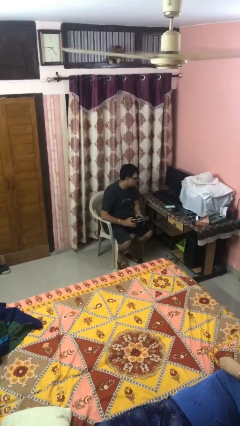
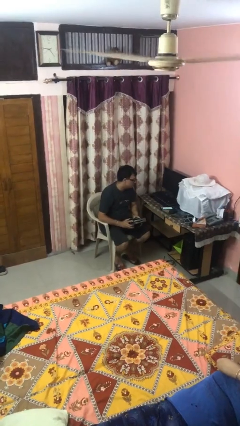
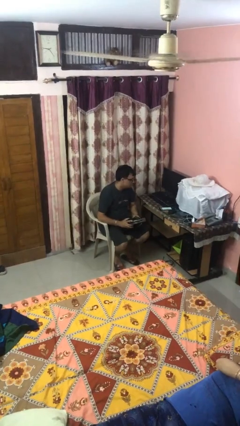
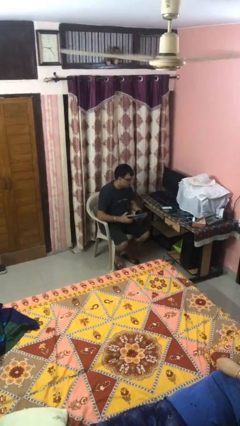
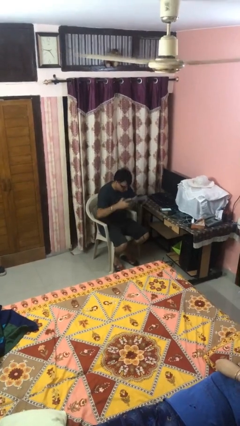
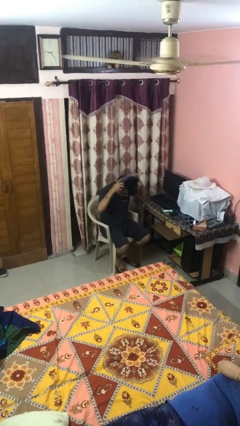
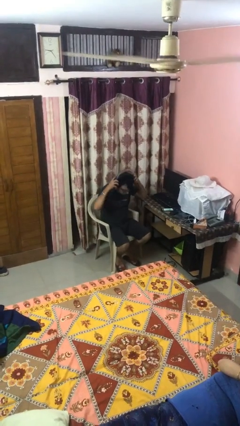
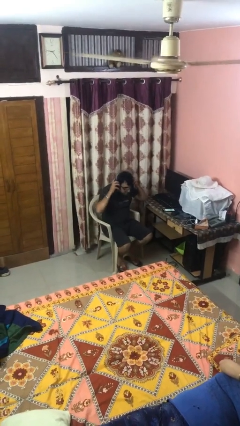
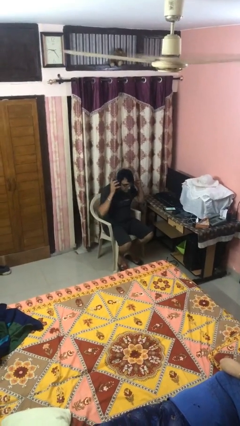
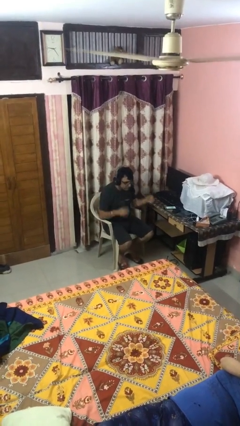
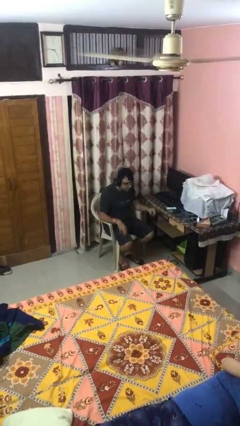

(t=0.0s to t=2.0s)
person puts on headphones

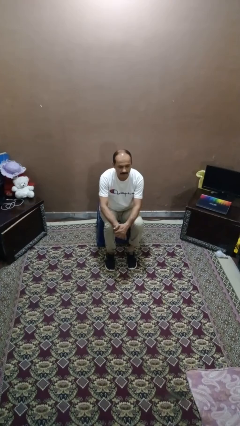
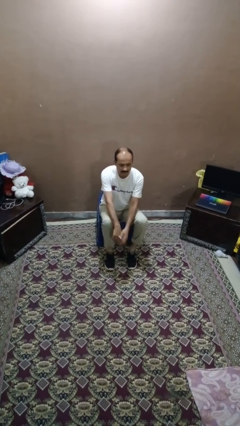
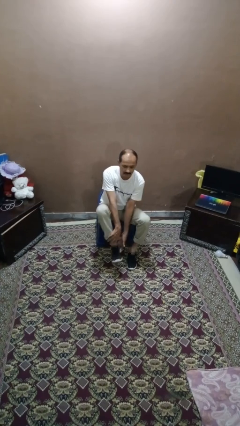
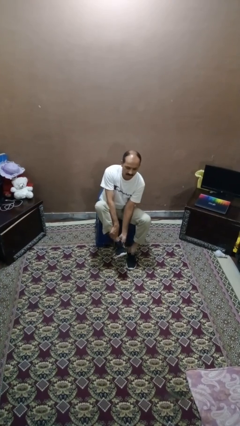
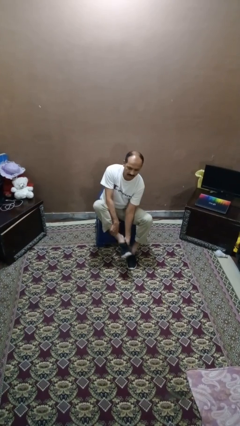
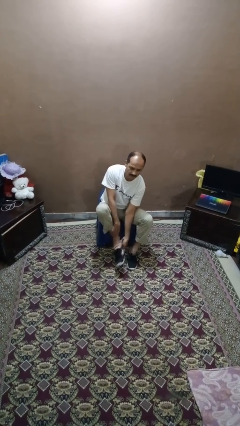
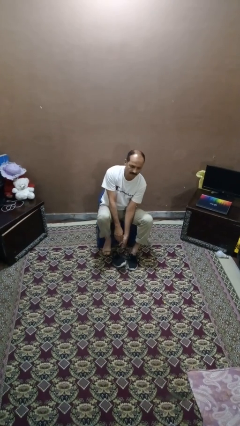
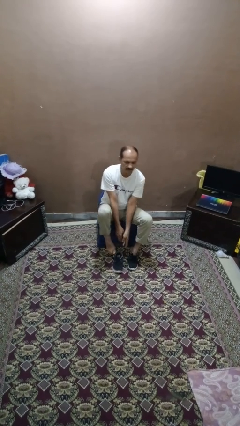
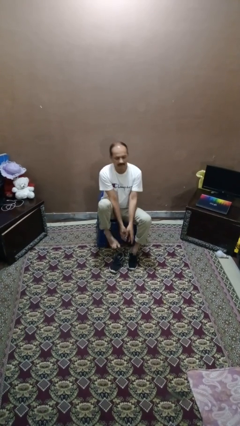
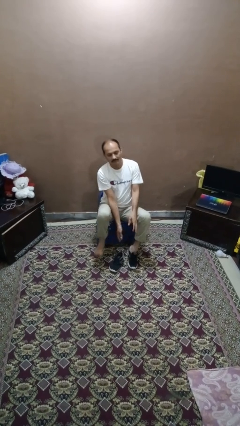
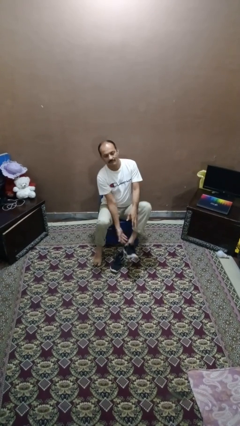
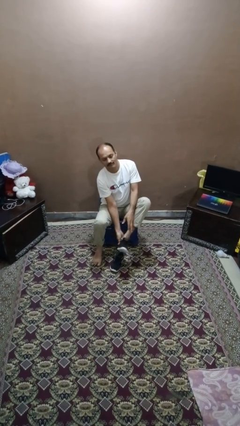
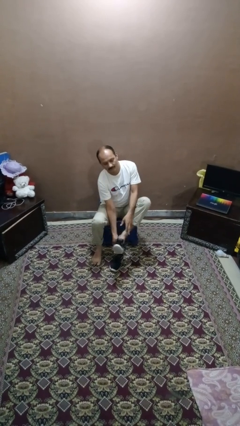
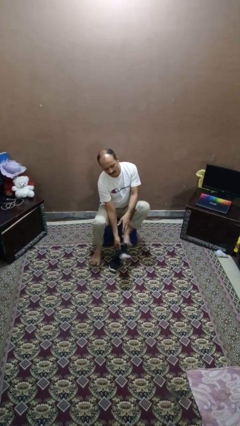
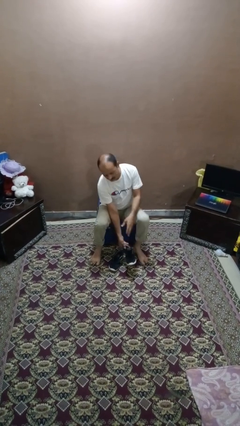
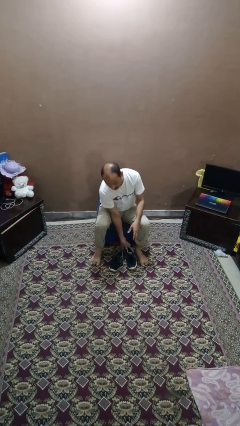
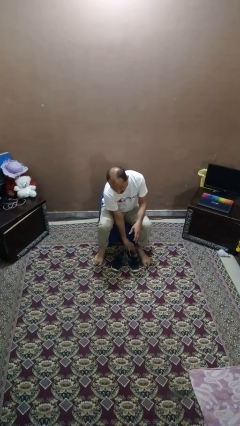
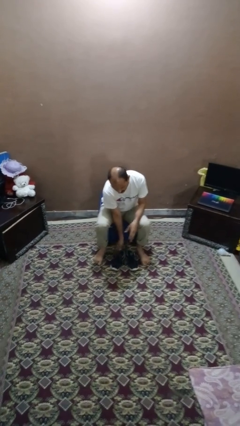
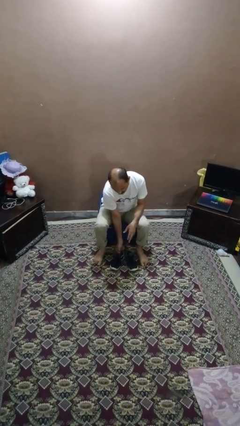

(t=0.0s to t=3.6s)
person takes off shoes

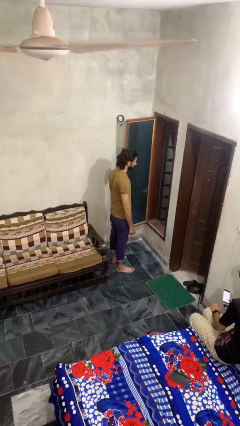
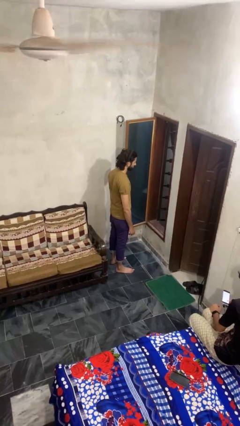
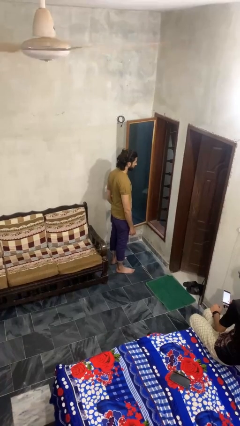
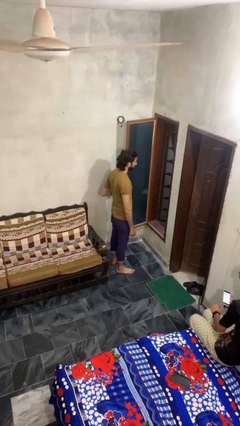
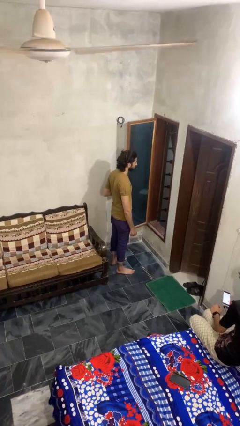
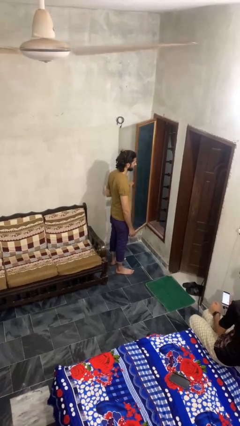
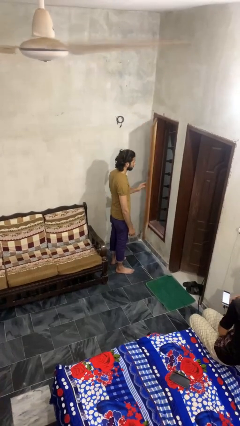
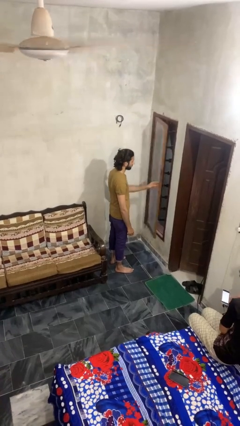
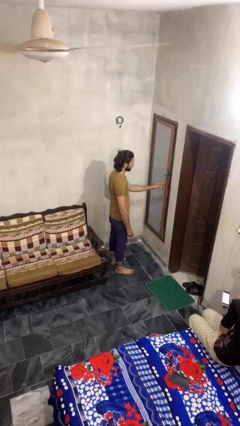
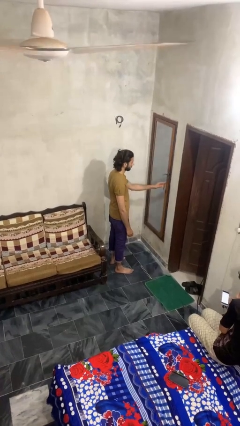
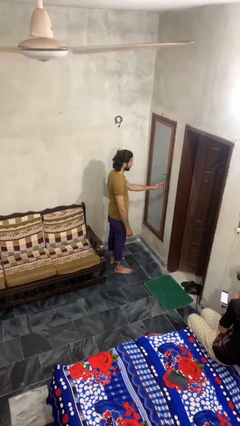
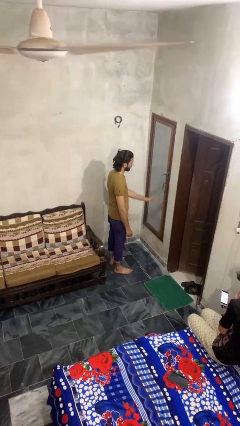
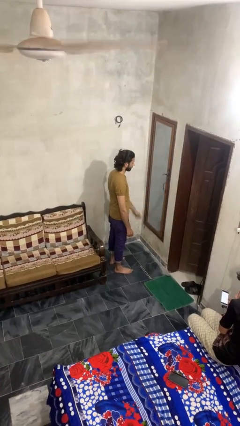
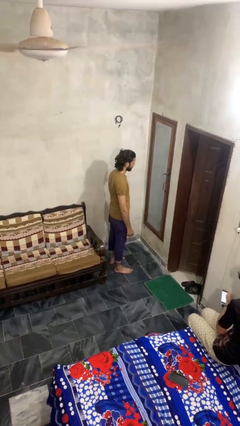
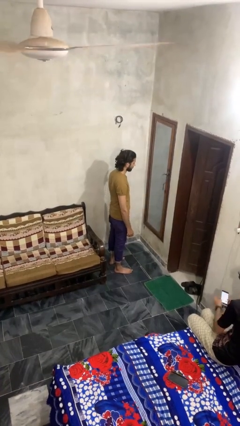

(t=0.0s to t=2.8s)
person closes home window

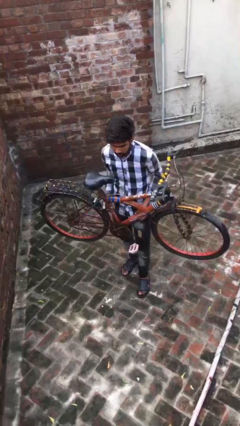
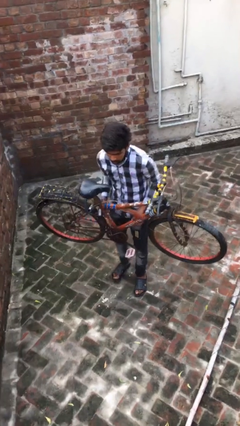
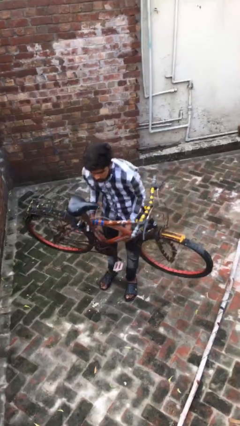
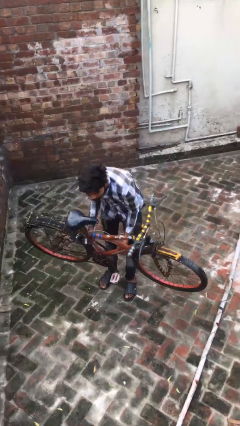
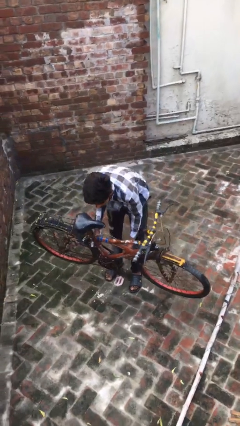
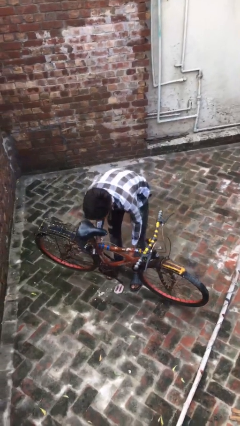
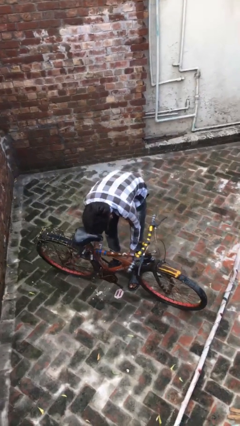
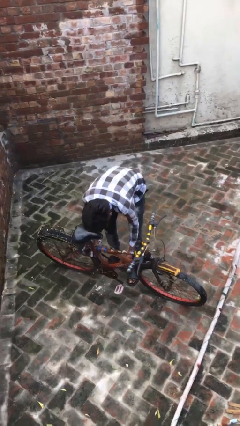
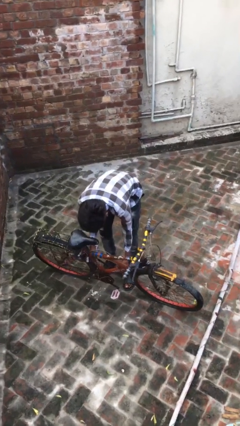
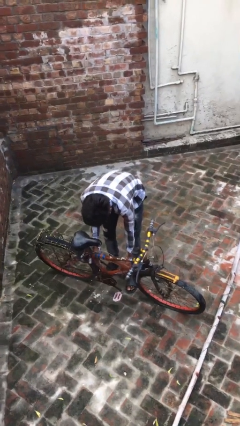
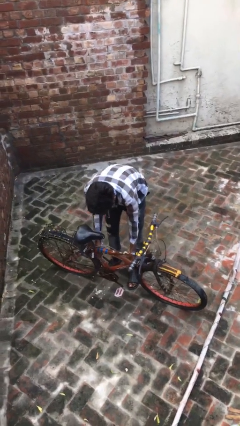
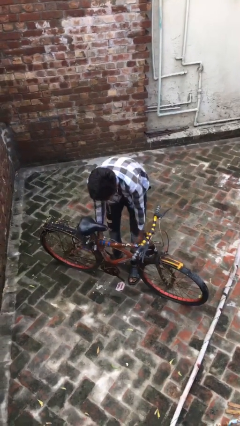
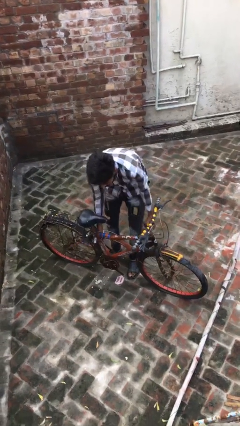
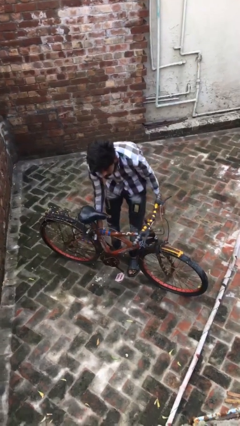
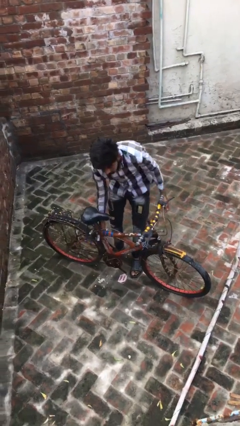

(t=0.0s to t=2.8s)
person puts down object on floor

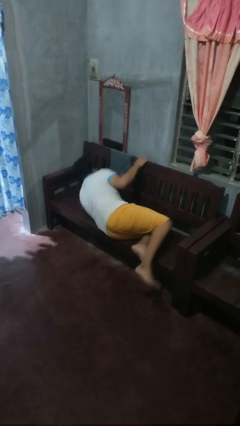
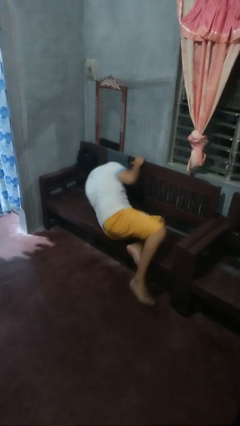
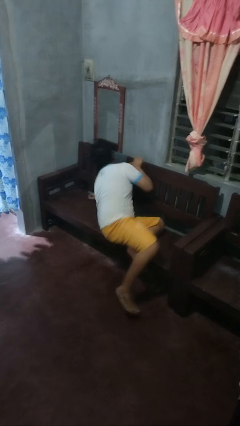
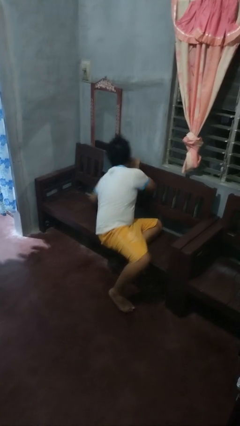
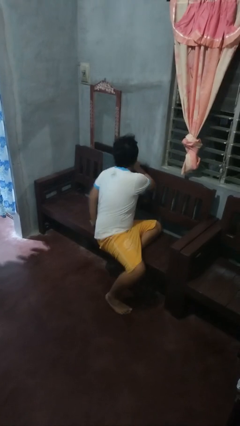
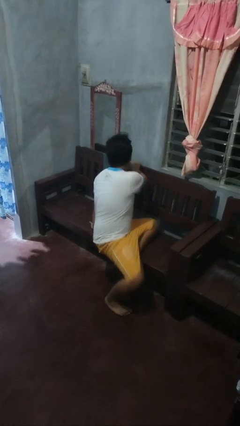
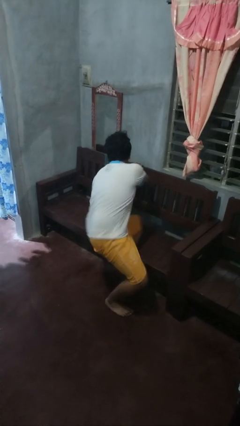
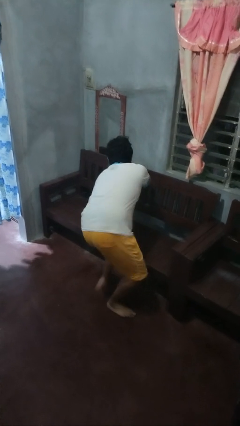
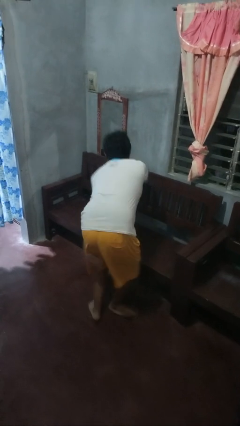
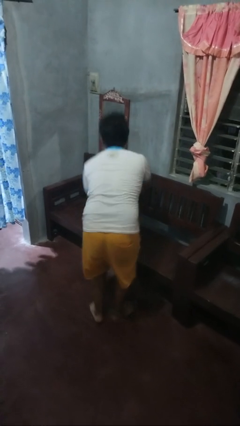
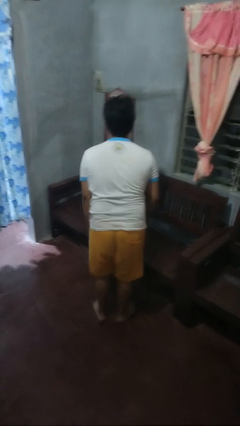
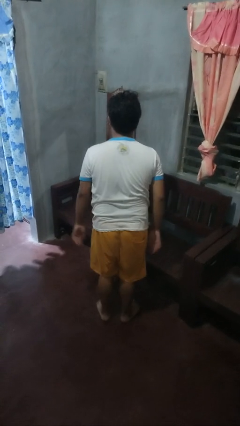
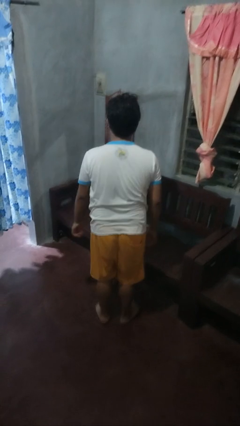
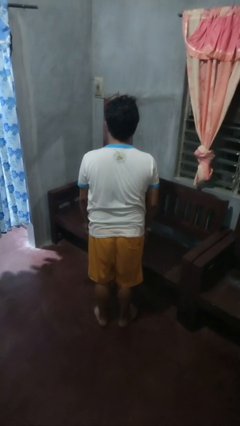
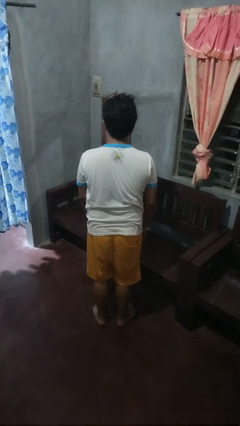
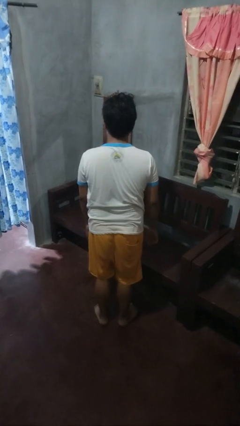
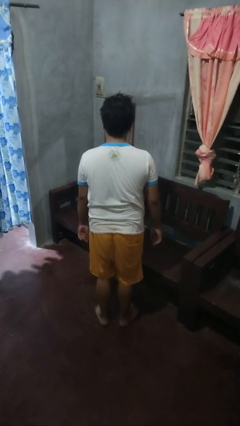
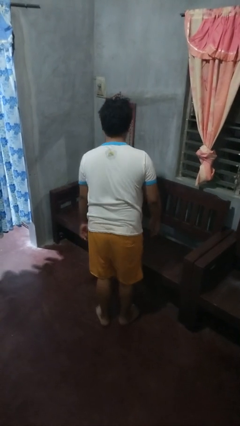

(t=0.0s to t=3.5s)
person stands up

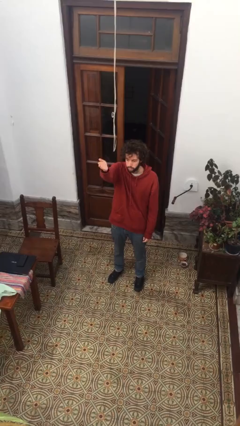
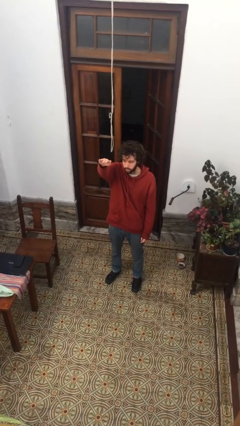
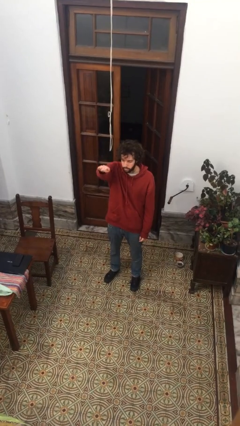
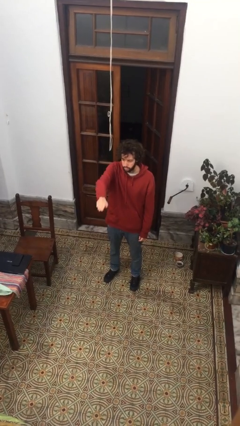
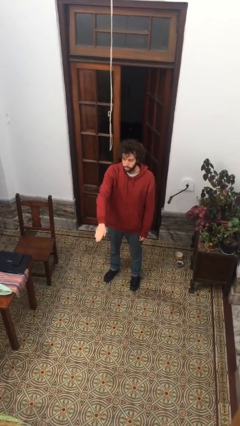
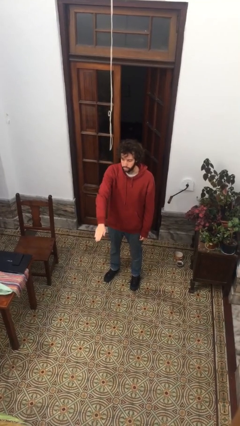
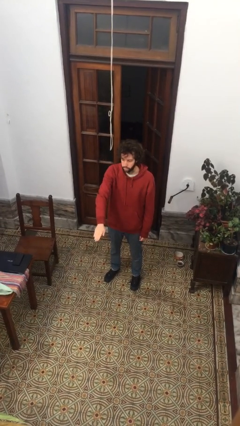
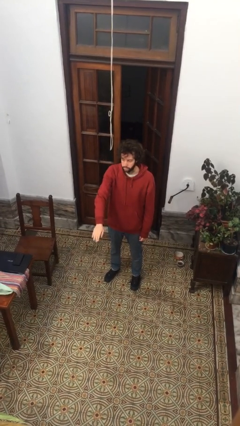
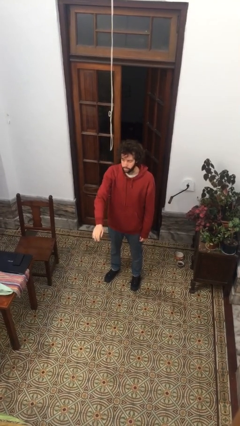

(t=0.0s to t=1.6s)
person gestures swipe down

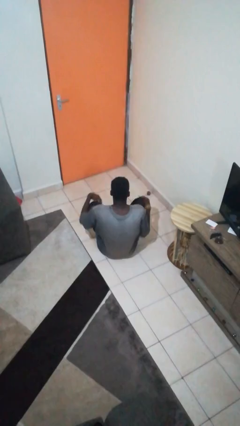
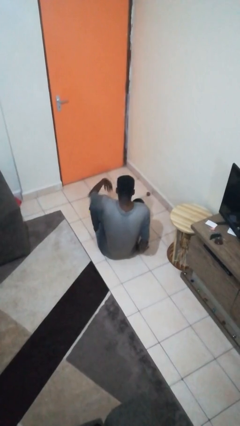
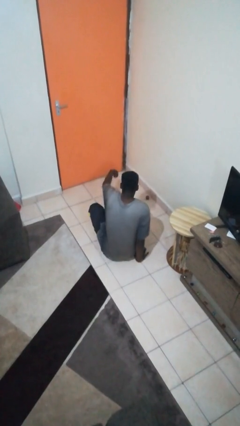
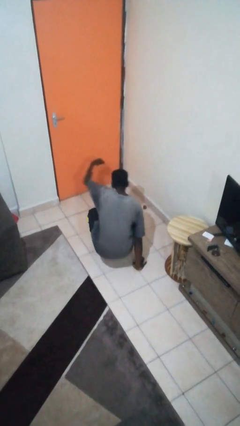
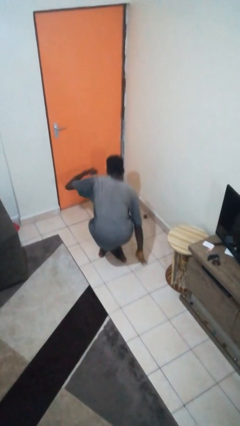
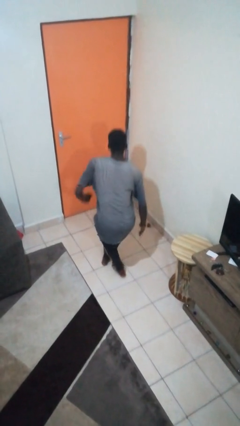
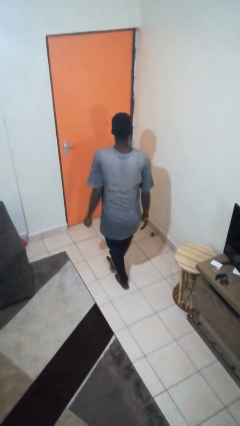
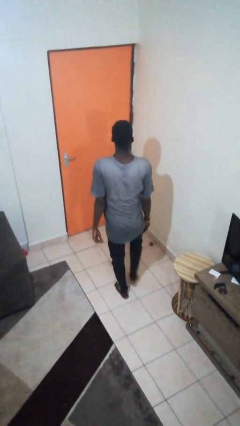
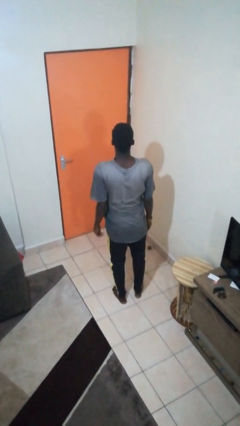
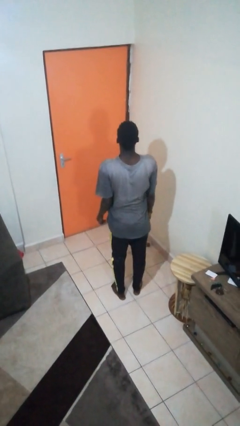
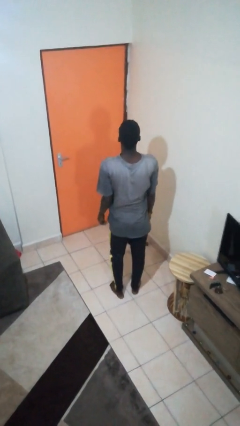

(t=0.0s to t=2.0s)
person stands up from floor
